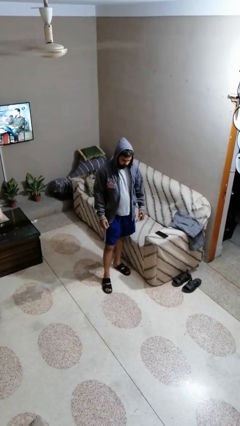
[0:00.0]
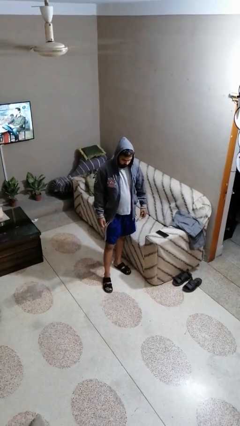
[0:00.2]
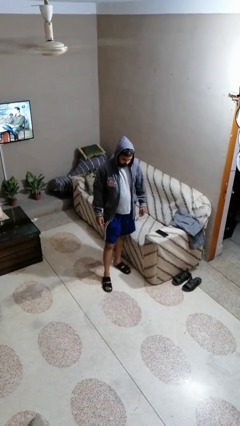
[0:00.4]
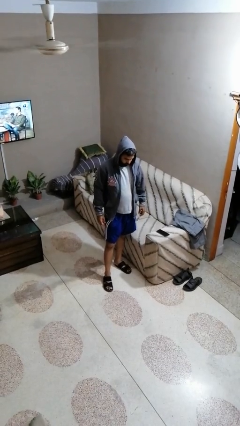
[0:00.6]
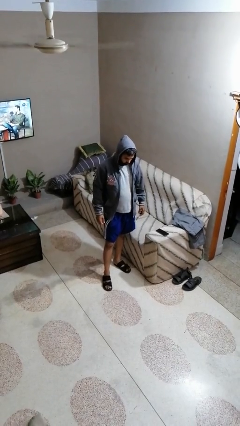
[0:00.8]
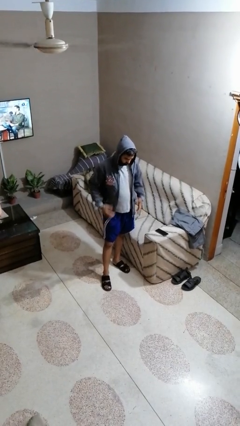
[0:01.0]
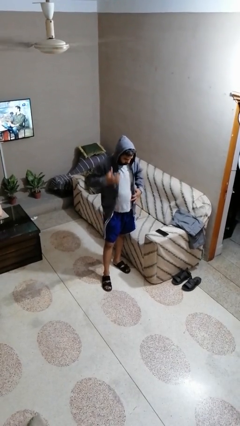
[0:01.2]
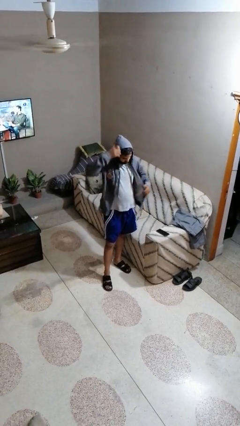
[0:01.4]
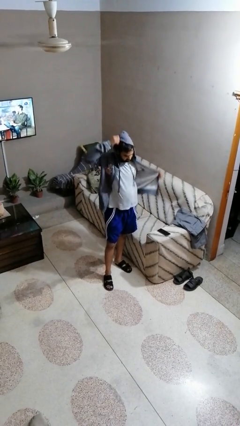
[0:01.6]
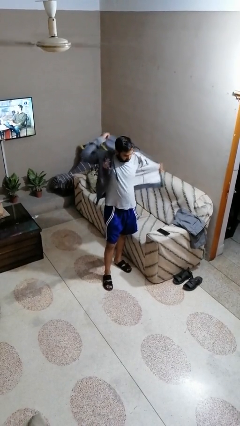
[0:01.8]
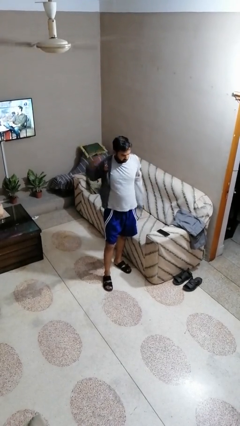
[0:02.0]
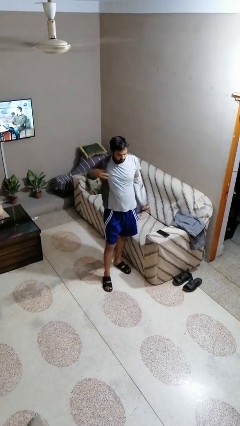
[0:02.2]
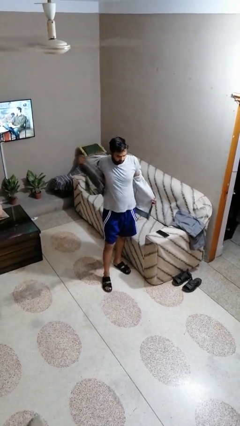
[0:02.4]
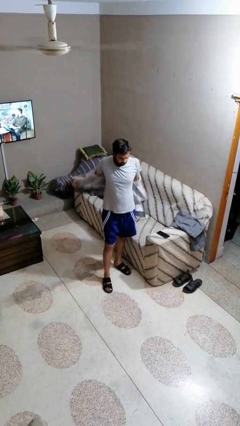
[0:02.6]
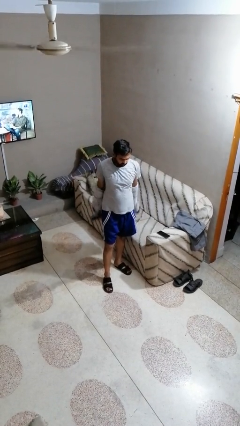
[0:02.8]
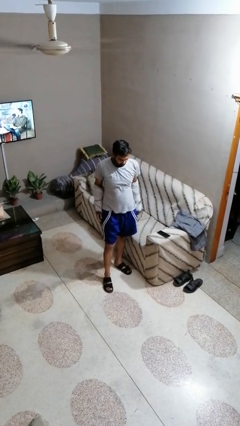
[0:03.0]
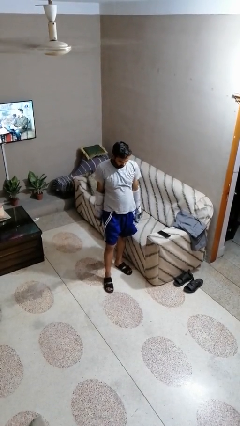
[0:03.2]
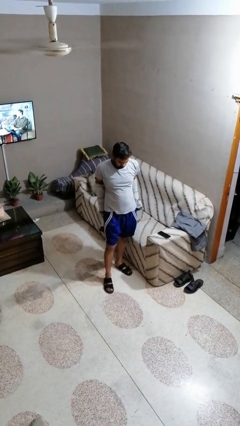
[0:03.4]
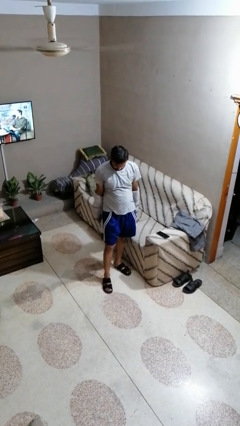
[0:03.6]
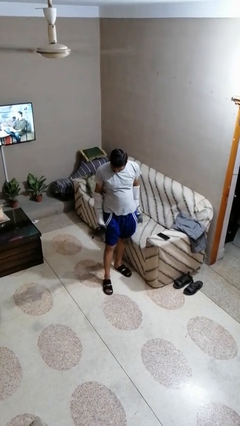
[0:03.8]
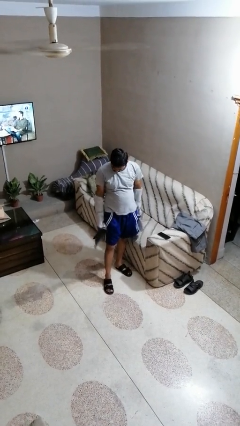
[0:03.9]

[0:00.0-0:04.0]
person takes off hoodie

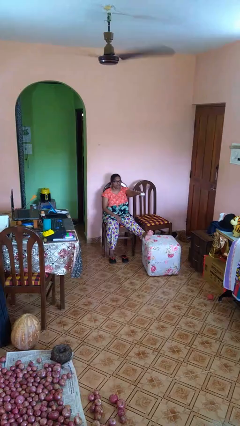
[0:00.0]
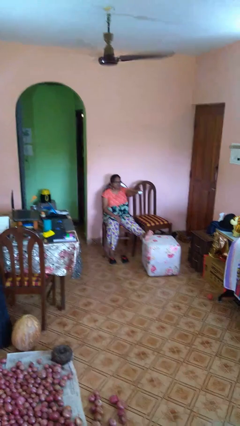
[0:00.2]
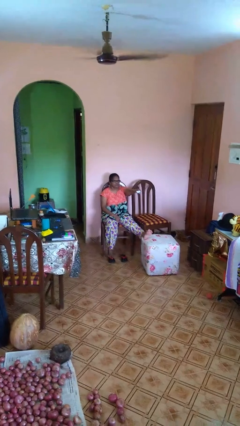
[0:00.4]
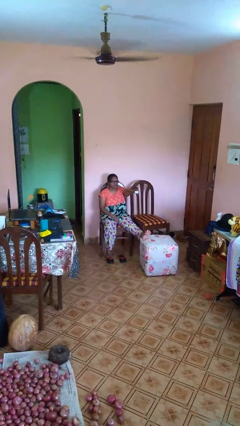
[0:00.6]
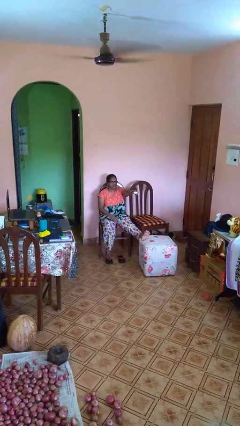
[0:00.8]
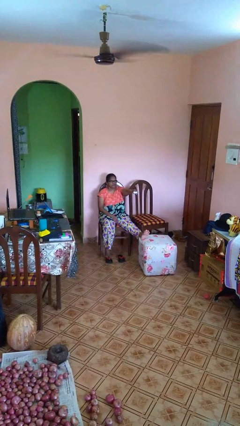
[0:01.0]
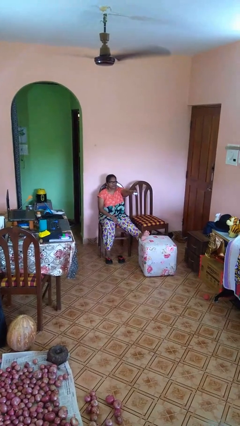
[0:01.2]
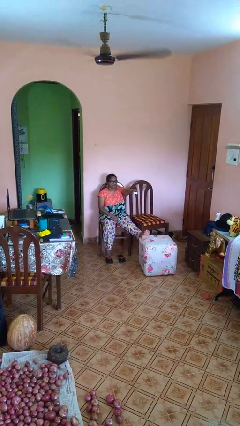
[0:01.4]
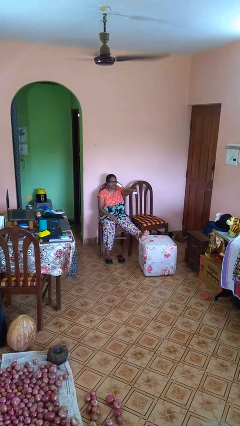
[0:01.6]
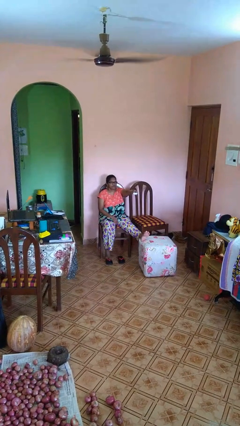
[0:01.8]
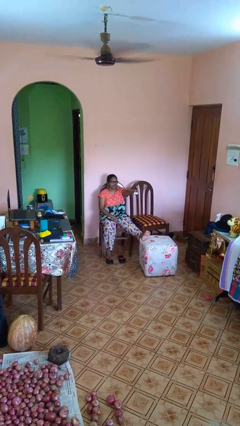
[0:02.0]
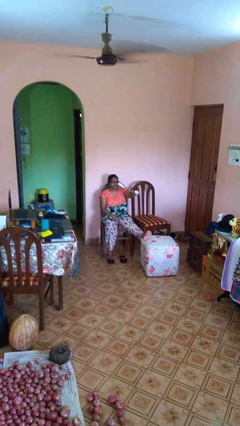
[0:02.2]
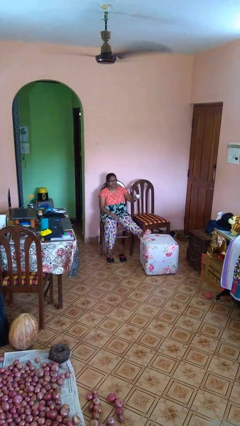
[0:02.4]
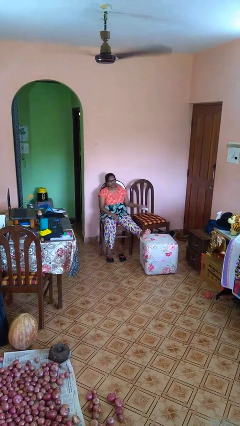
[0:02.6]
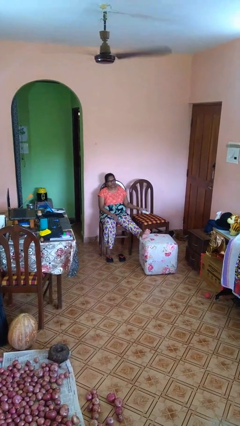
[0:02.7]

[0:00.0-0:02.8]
person uses television remote

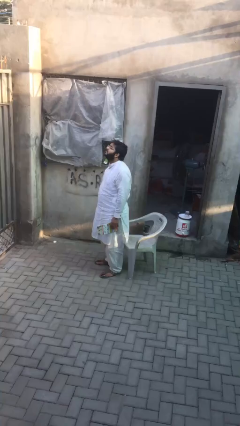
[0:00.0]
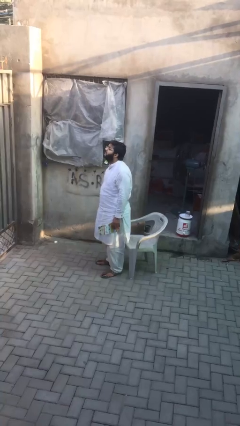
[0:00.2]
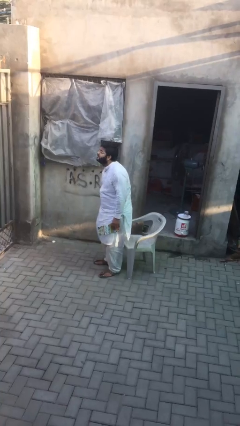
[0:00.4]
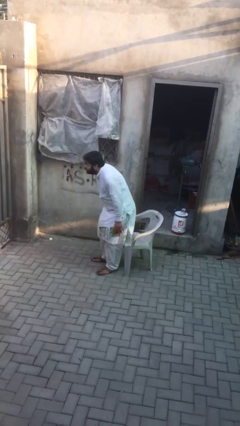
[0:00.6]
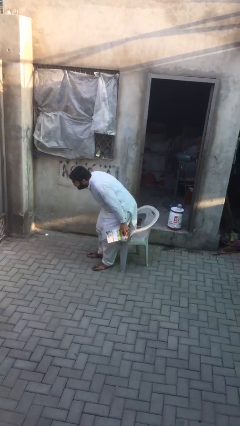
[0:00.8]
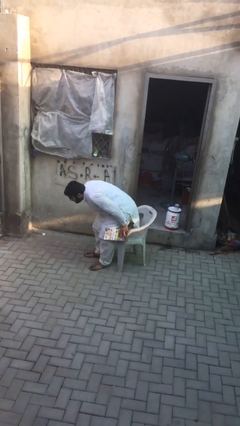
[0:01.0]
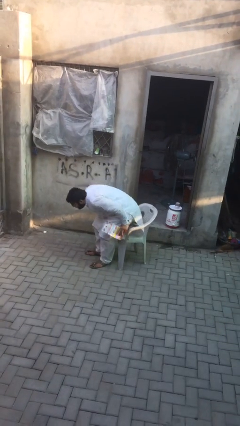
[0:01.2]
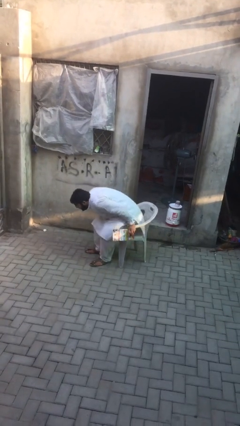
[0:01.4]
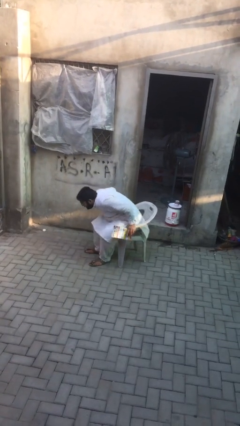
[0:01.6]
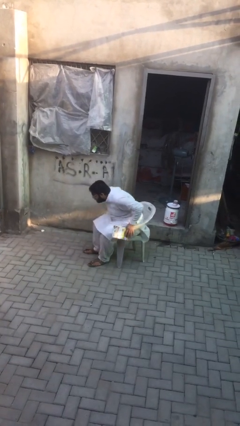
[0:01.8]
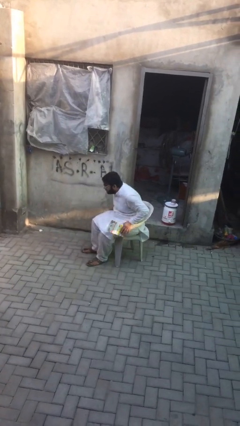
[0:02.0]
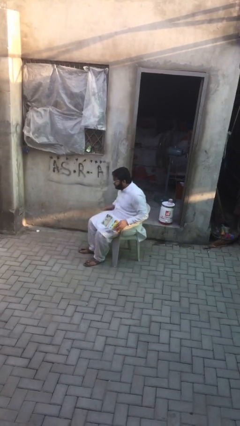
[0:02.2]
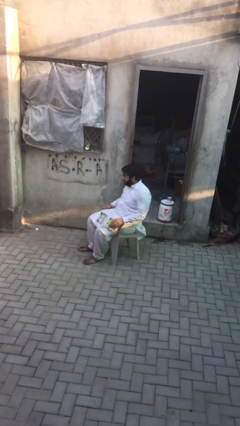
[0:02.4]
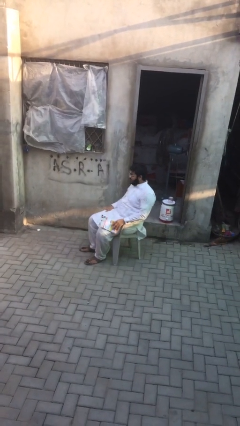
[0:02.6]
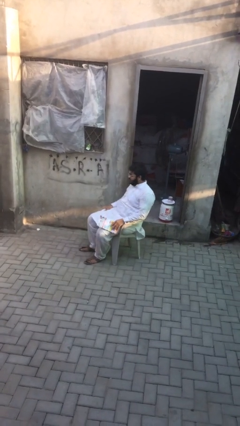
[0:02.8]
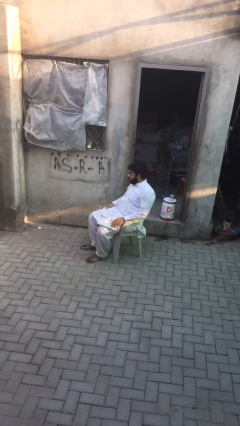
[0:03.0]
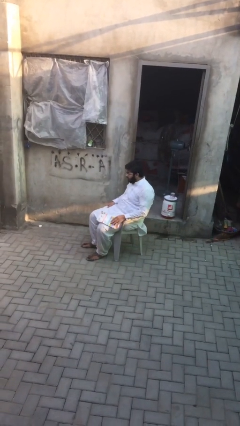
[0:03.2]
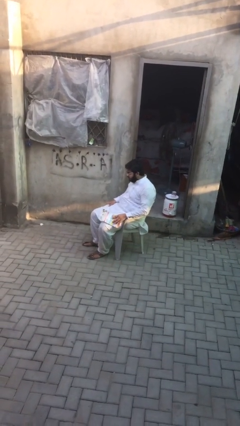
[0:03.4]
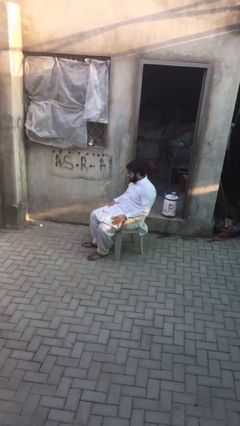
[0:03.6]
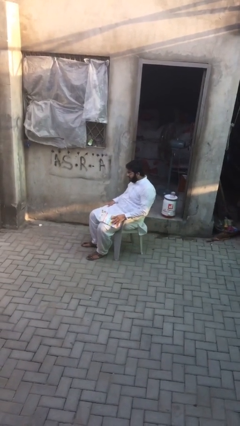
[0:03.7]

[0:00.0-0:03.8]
person sits down

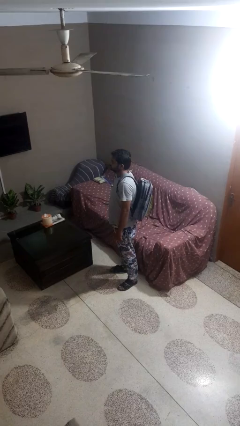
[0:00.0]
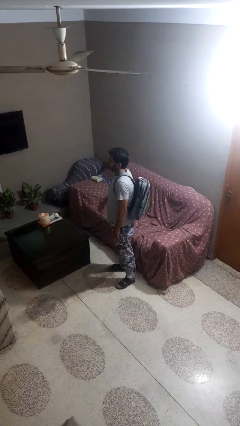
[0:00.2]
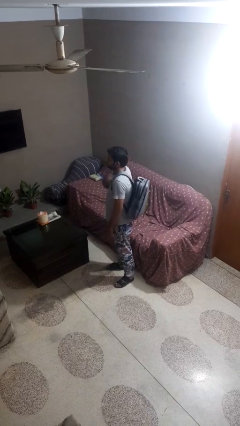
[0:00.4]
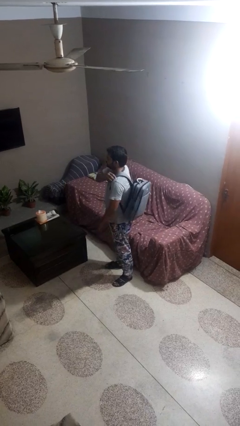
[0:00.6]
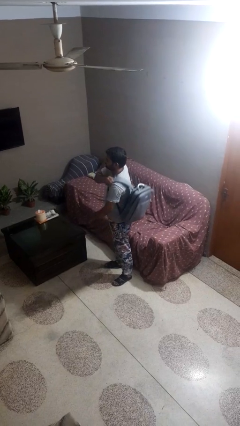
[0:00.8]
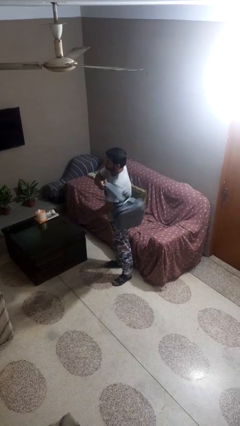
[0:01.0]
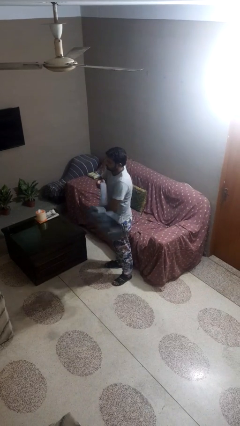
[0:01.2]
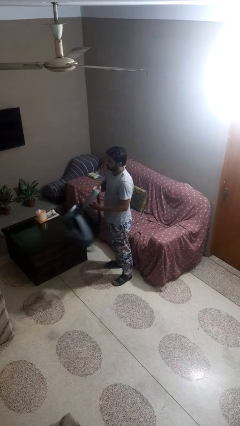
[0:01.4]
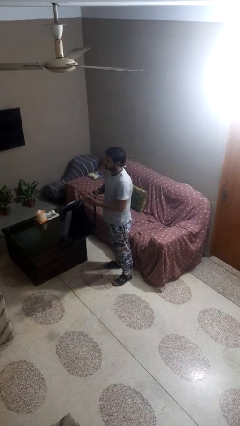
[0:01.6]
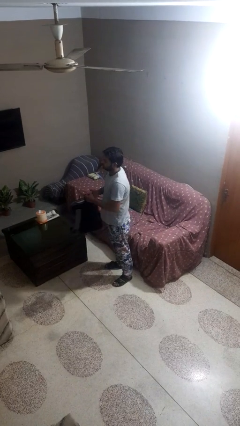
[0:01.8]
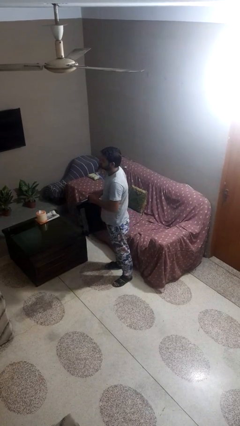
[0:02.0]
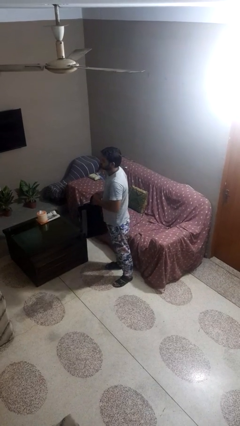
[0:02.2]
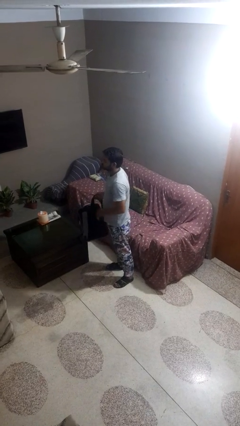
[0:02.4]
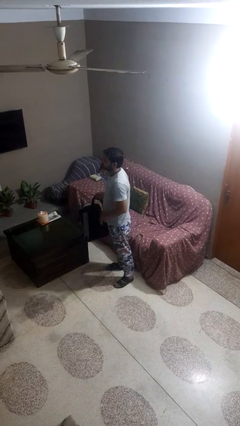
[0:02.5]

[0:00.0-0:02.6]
person takes off backpack

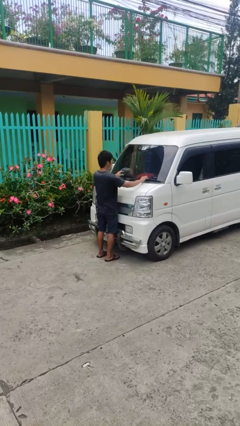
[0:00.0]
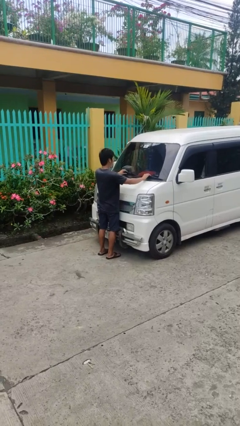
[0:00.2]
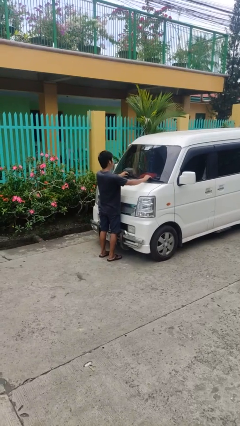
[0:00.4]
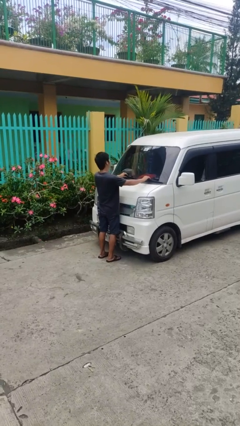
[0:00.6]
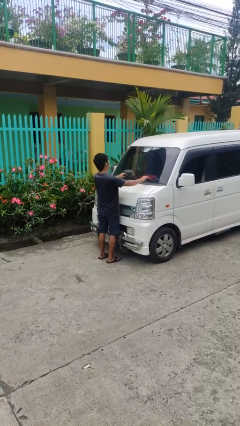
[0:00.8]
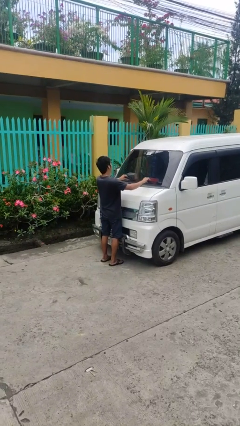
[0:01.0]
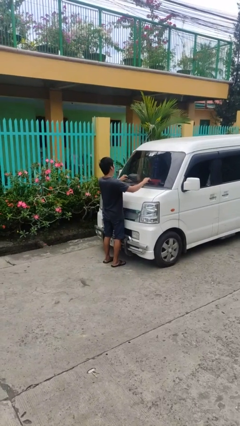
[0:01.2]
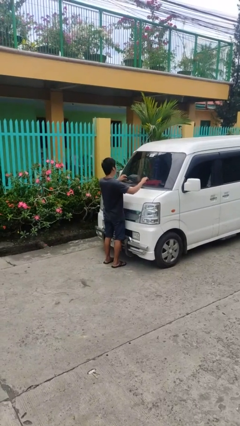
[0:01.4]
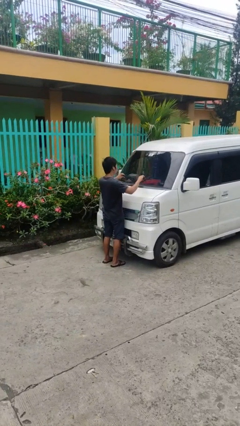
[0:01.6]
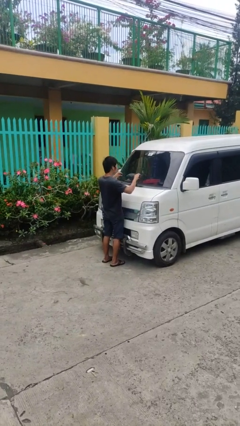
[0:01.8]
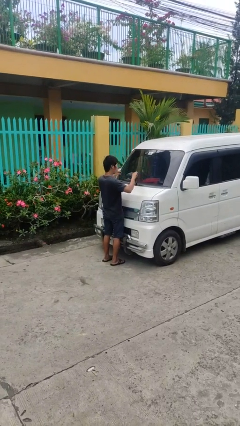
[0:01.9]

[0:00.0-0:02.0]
person flips up car wipers

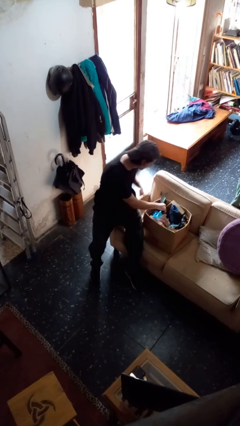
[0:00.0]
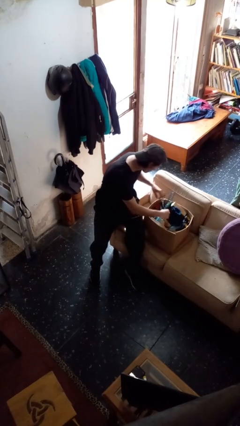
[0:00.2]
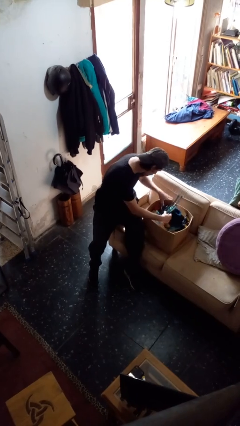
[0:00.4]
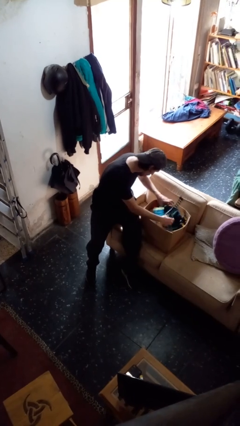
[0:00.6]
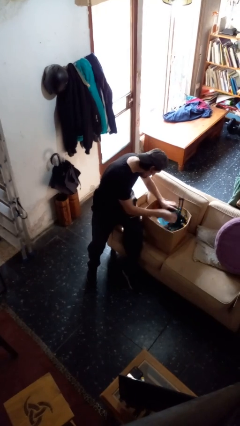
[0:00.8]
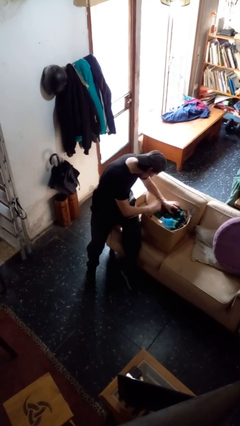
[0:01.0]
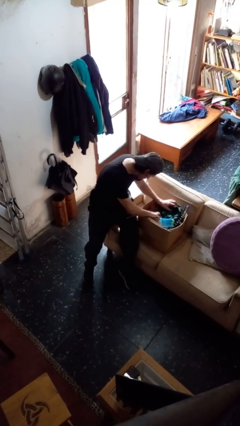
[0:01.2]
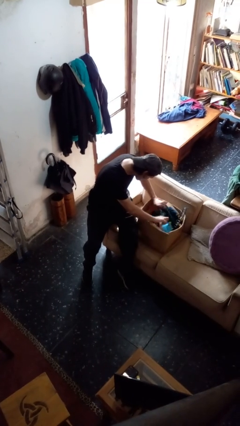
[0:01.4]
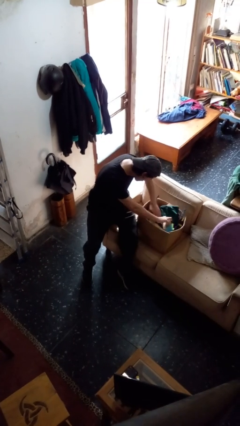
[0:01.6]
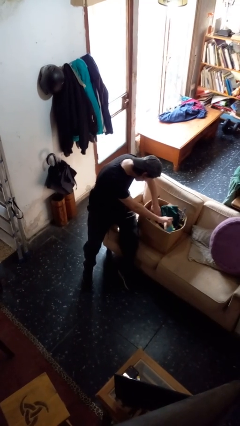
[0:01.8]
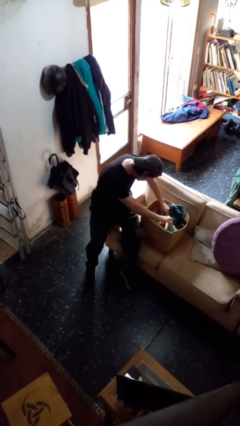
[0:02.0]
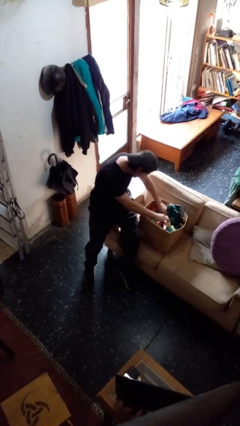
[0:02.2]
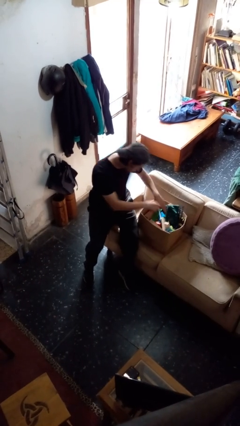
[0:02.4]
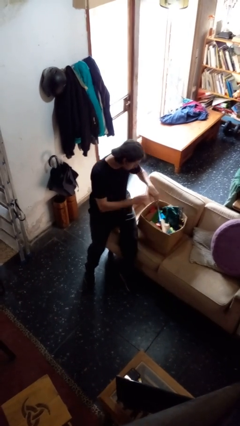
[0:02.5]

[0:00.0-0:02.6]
person searches in box
